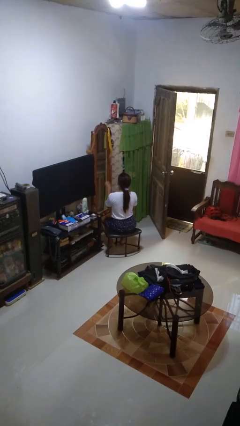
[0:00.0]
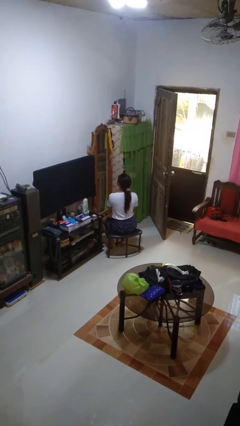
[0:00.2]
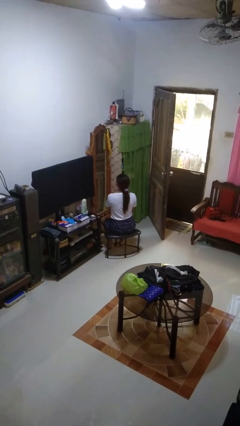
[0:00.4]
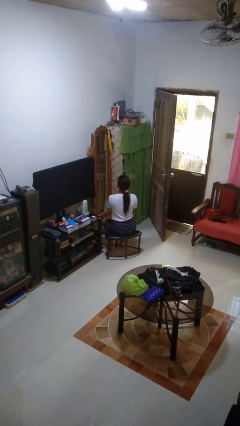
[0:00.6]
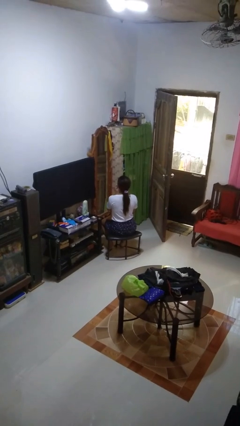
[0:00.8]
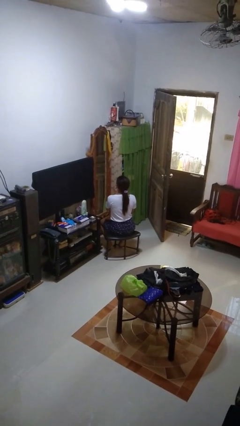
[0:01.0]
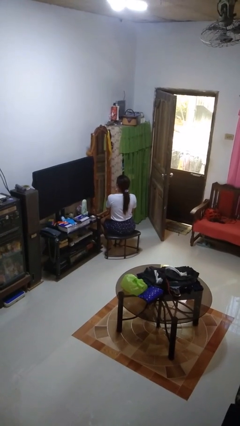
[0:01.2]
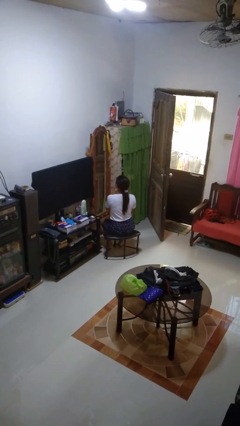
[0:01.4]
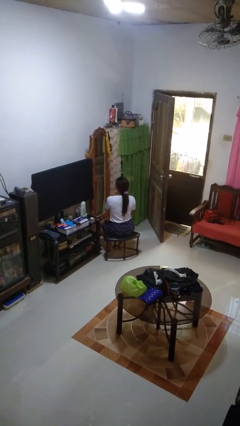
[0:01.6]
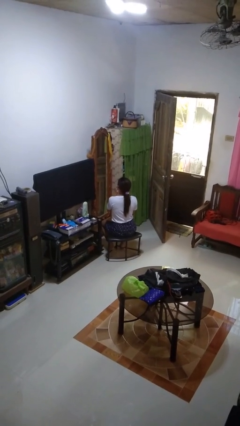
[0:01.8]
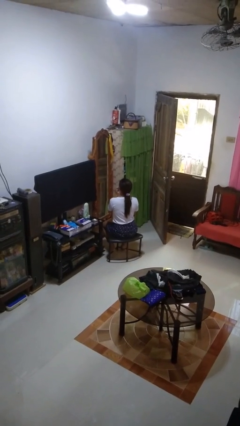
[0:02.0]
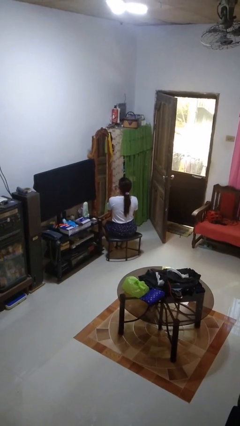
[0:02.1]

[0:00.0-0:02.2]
person applies lip makeup

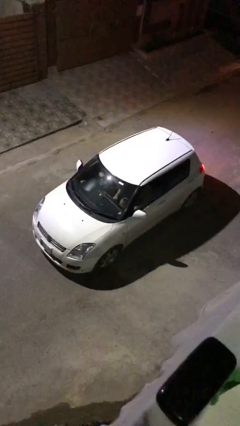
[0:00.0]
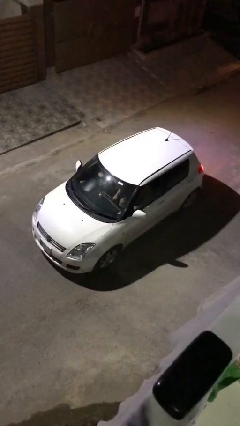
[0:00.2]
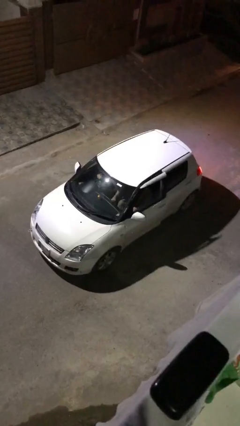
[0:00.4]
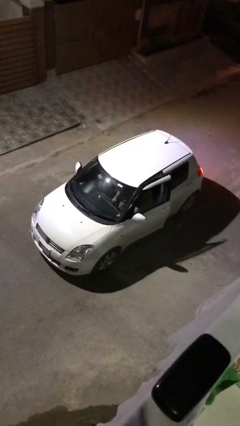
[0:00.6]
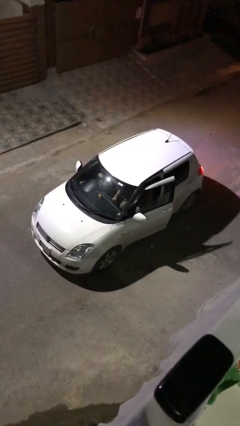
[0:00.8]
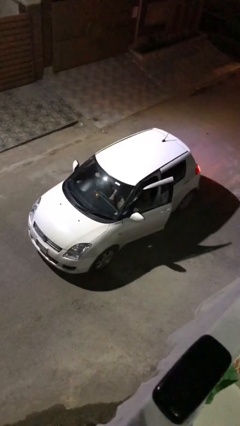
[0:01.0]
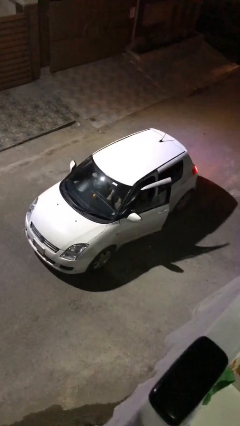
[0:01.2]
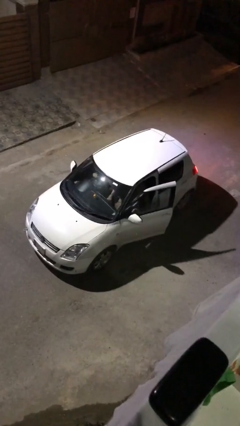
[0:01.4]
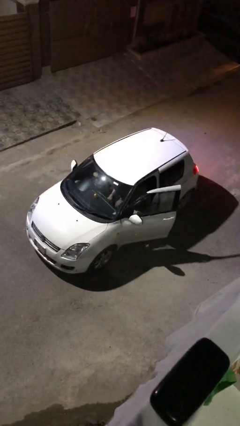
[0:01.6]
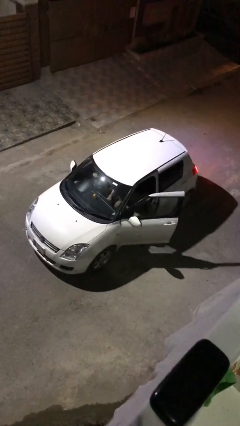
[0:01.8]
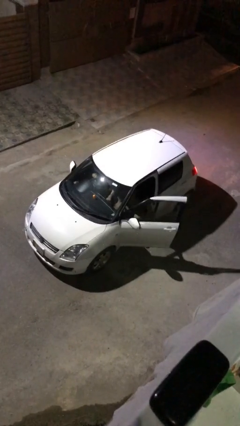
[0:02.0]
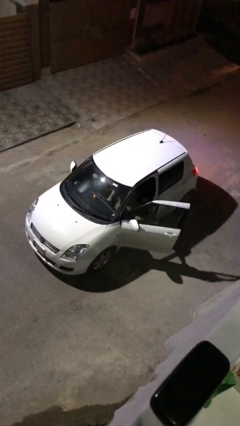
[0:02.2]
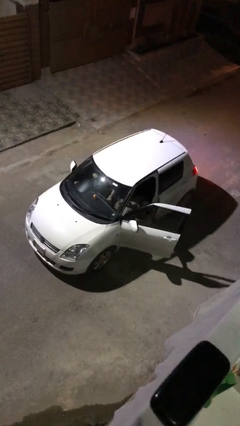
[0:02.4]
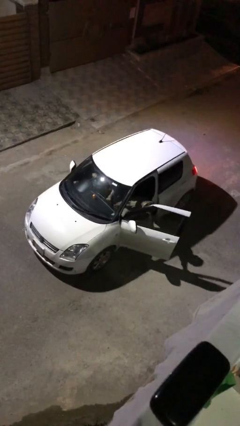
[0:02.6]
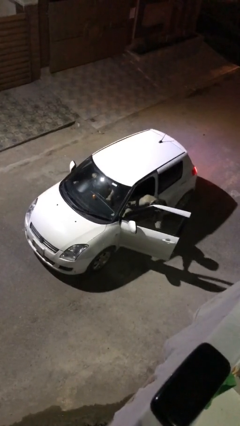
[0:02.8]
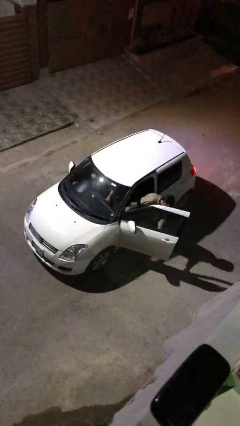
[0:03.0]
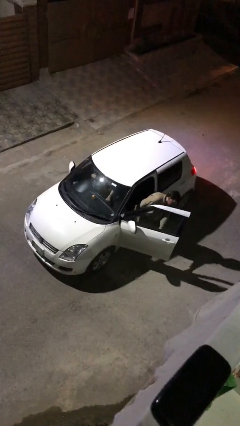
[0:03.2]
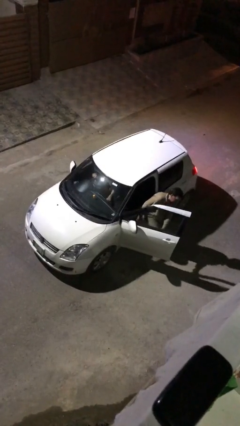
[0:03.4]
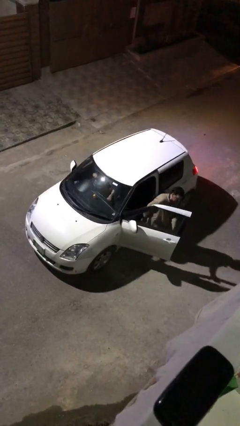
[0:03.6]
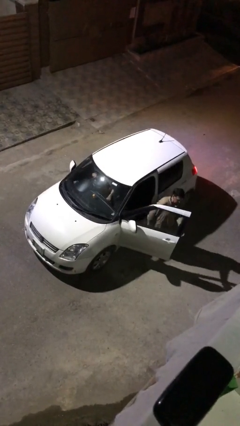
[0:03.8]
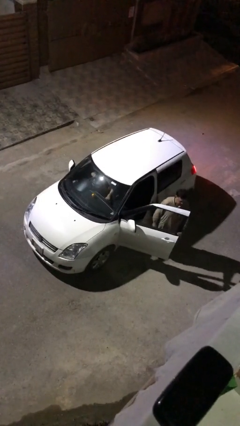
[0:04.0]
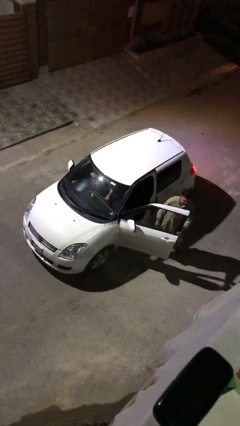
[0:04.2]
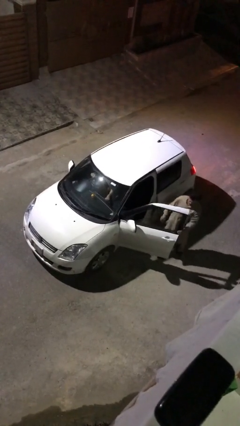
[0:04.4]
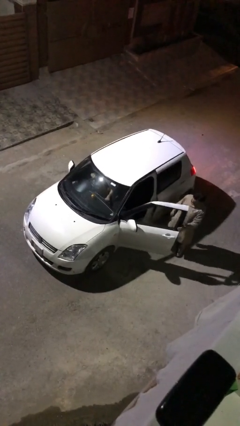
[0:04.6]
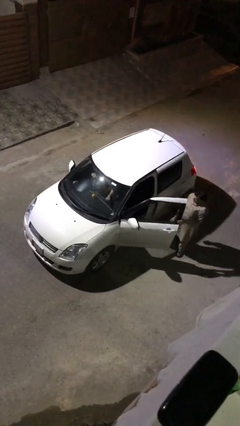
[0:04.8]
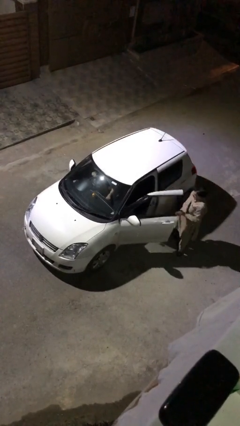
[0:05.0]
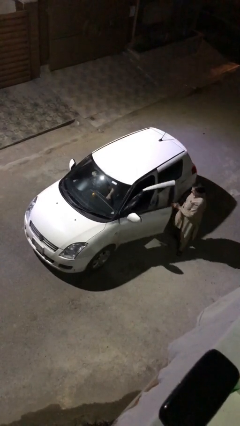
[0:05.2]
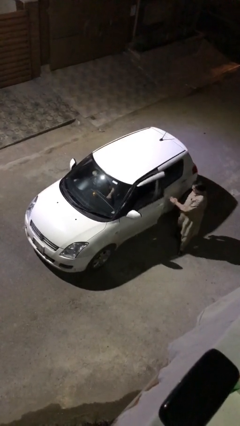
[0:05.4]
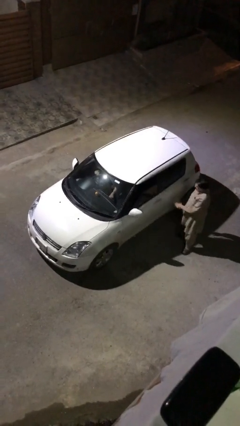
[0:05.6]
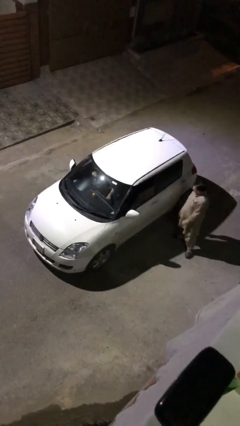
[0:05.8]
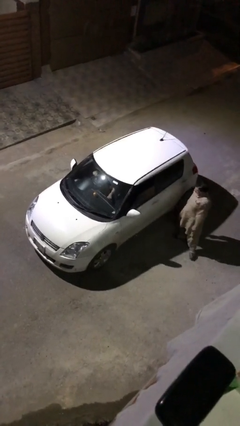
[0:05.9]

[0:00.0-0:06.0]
car drops off person

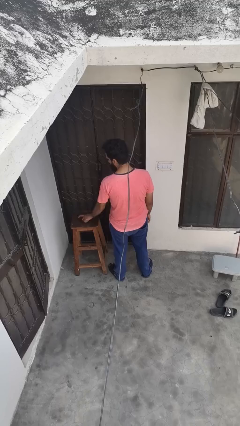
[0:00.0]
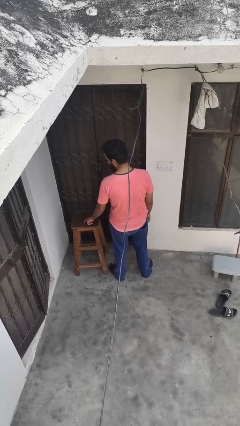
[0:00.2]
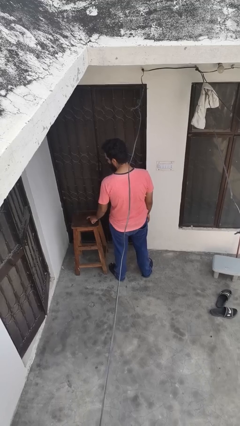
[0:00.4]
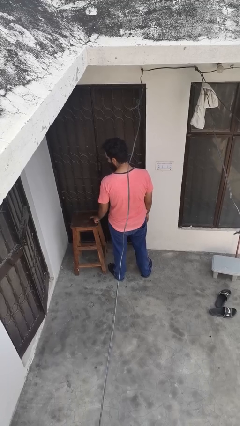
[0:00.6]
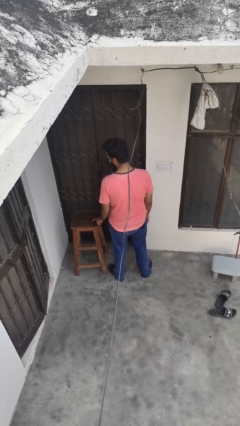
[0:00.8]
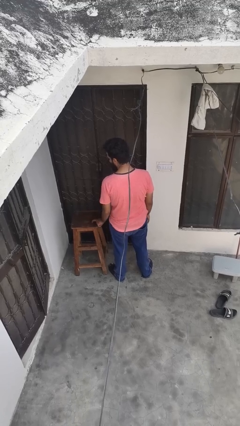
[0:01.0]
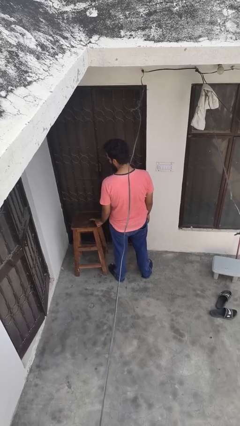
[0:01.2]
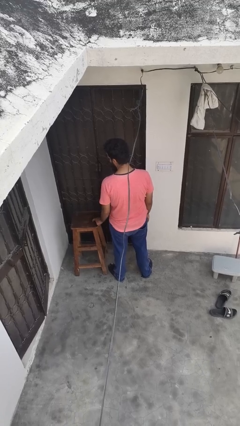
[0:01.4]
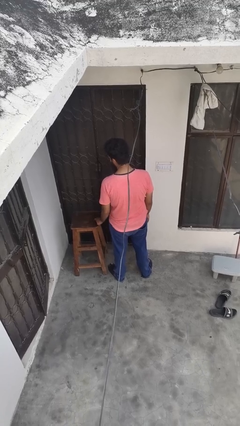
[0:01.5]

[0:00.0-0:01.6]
person taps object with finger

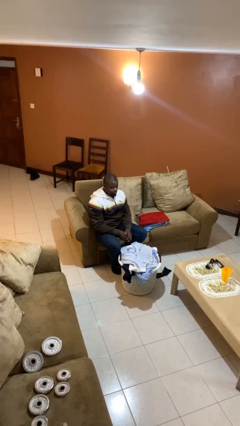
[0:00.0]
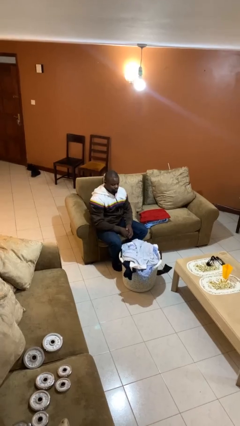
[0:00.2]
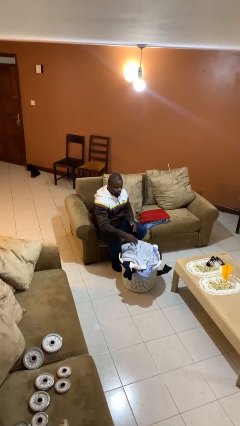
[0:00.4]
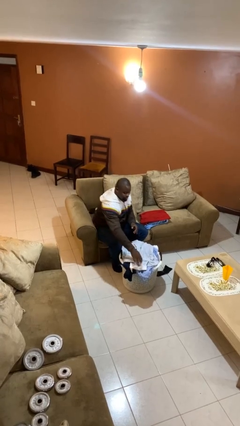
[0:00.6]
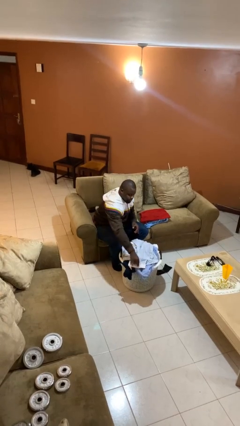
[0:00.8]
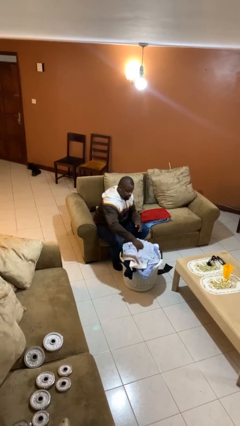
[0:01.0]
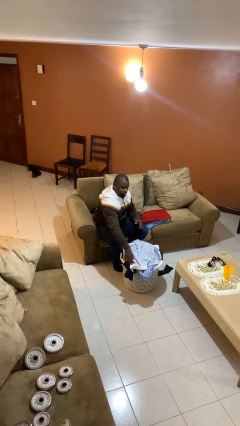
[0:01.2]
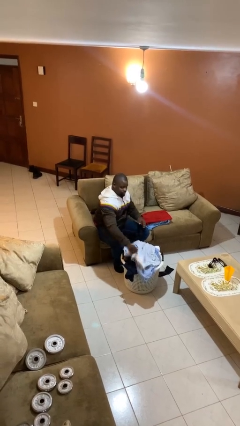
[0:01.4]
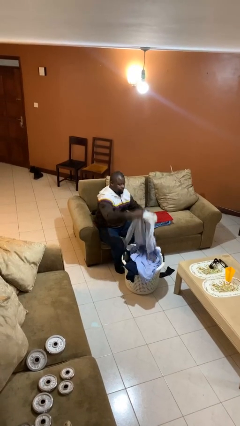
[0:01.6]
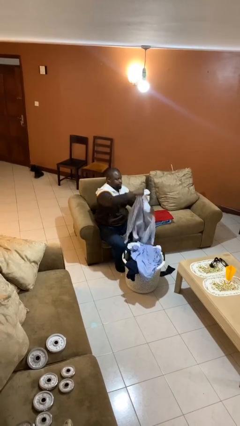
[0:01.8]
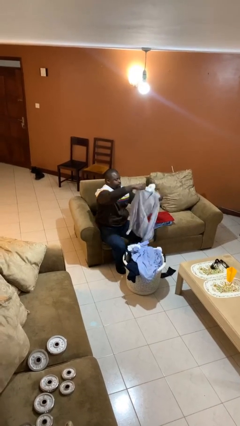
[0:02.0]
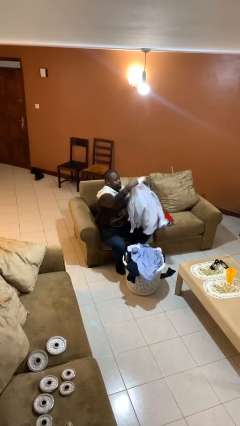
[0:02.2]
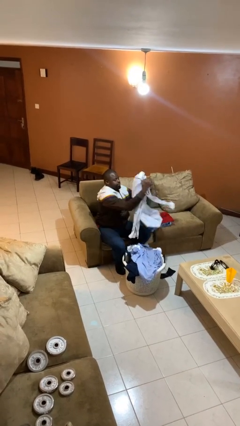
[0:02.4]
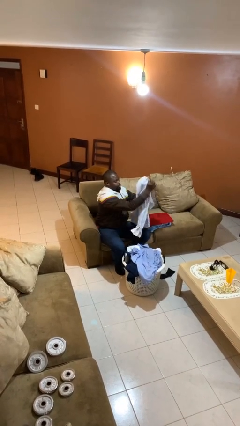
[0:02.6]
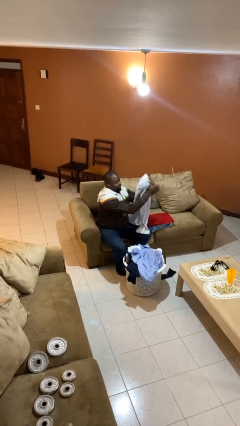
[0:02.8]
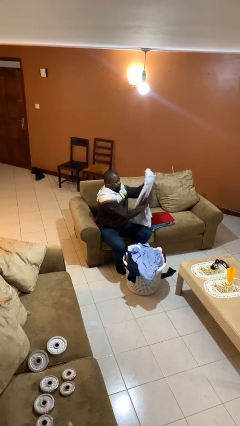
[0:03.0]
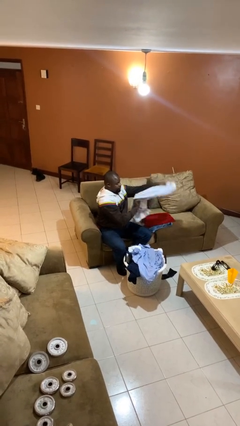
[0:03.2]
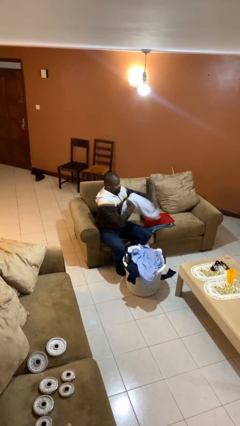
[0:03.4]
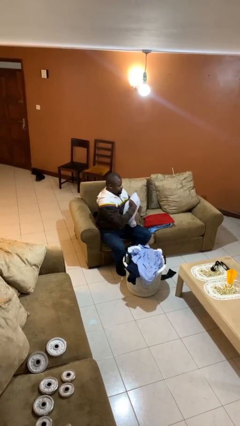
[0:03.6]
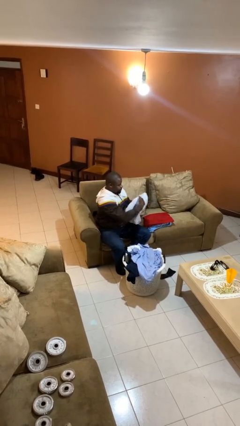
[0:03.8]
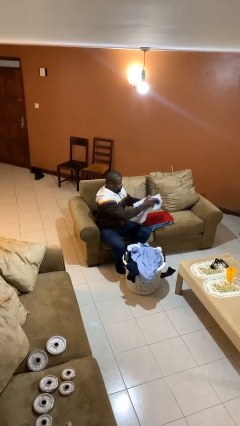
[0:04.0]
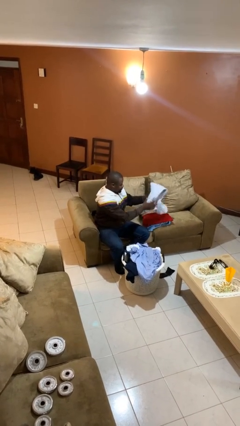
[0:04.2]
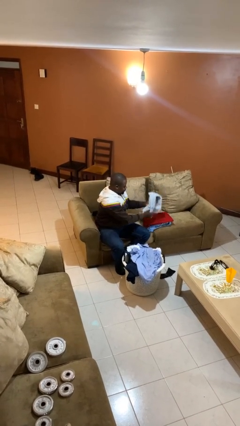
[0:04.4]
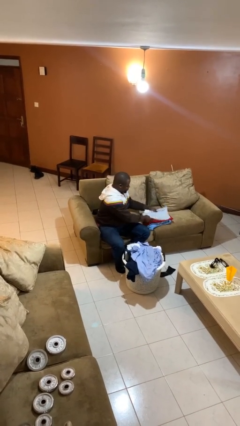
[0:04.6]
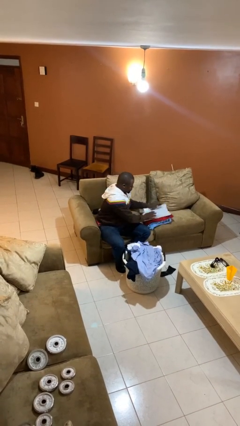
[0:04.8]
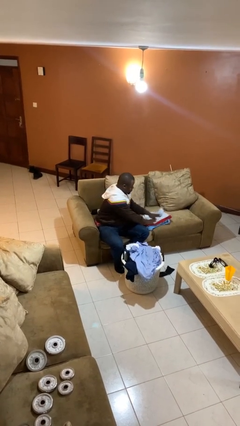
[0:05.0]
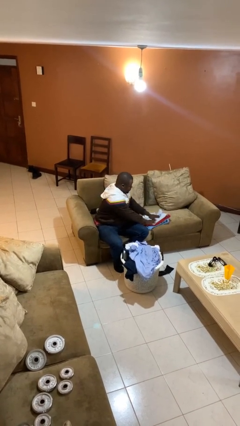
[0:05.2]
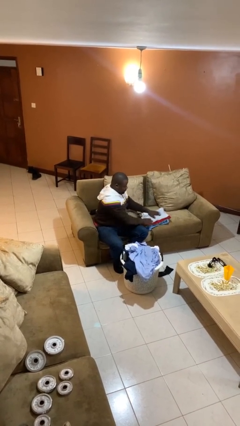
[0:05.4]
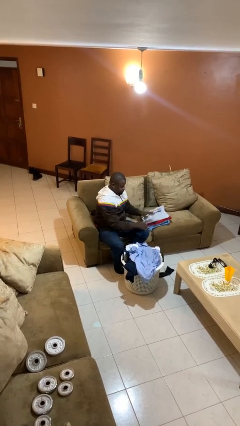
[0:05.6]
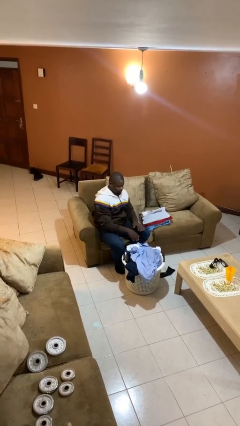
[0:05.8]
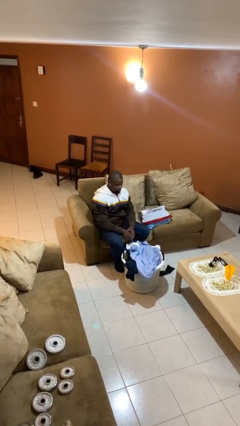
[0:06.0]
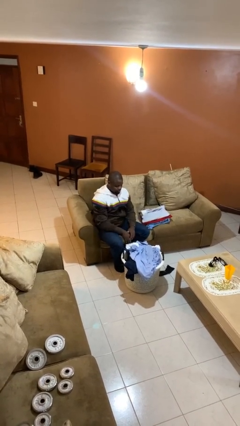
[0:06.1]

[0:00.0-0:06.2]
person folds shirt

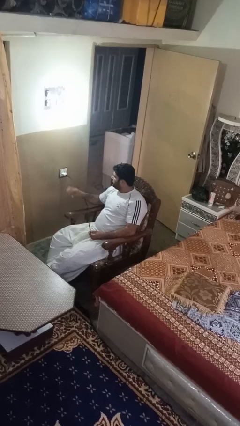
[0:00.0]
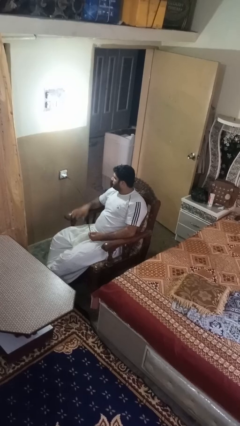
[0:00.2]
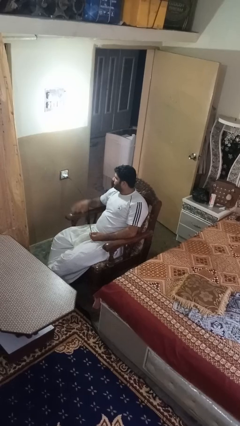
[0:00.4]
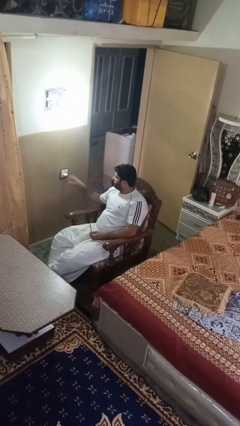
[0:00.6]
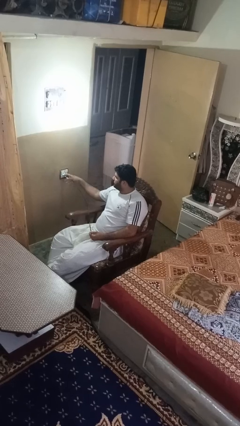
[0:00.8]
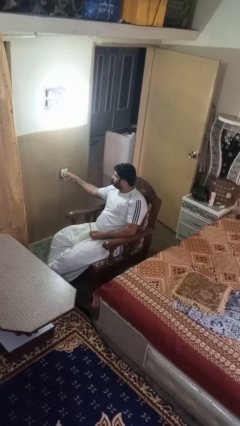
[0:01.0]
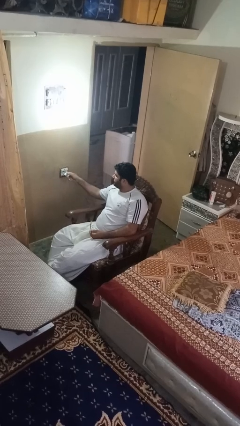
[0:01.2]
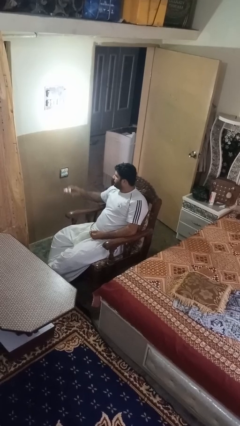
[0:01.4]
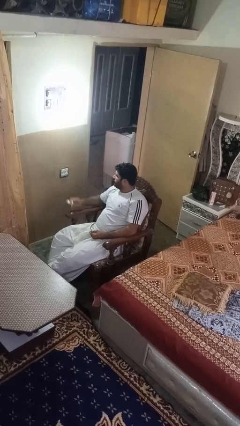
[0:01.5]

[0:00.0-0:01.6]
person unplugs from electrical socket
